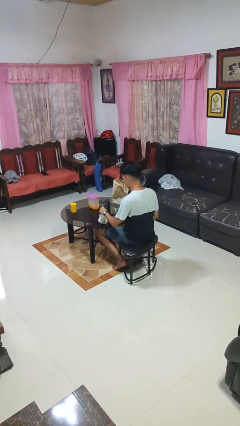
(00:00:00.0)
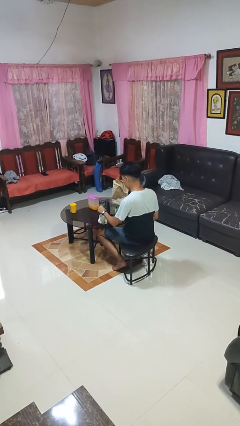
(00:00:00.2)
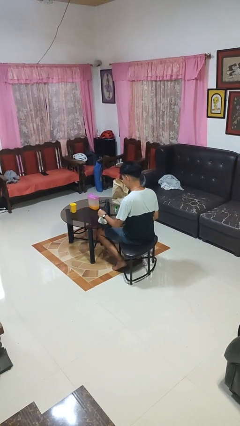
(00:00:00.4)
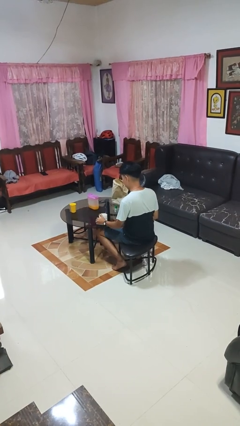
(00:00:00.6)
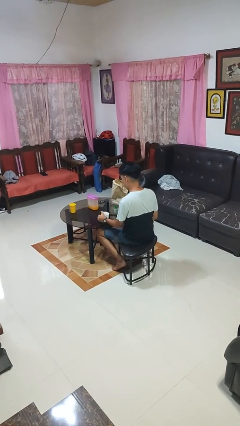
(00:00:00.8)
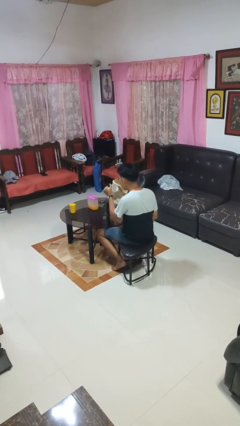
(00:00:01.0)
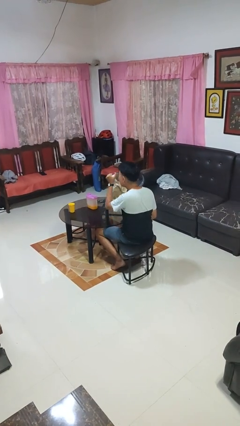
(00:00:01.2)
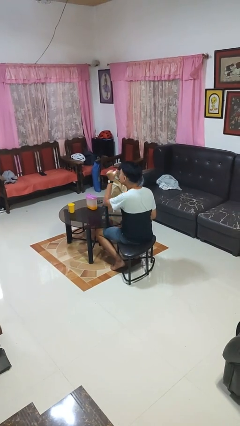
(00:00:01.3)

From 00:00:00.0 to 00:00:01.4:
person stirs mug

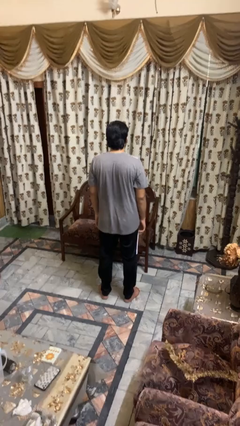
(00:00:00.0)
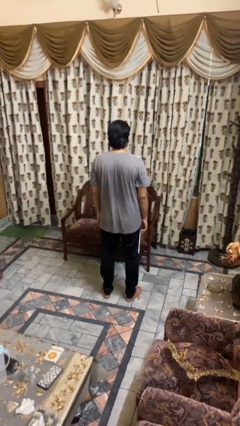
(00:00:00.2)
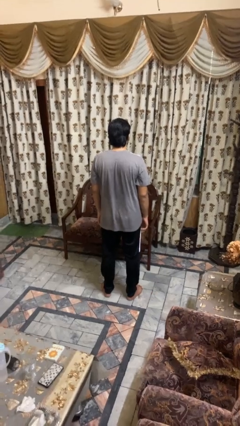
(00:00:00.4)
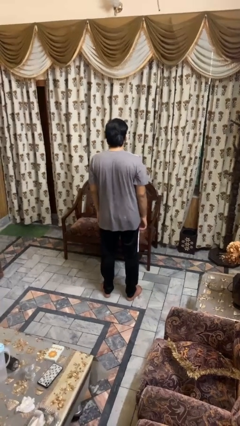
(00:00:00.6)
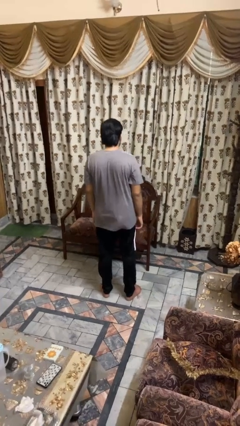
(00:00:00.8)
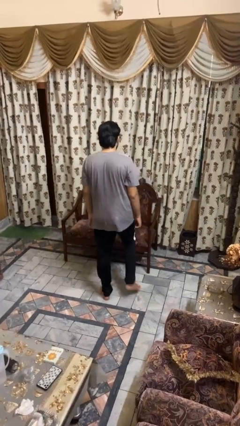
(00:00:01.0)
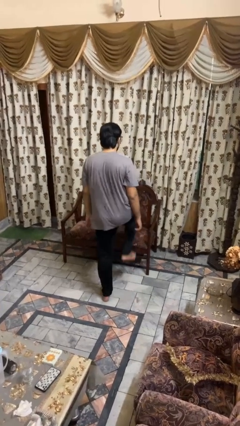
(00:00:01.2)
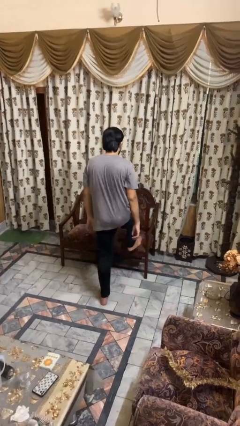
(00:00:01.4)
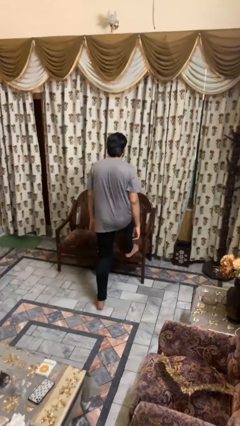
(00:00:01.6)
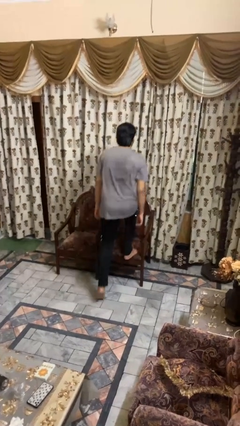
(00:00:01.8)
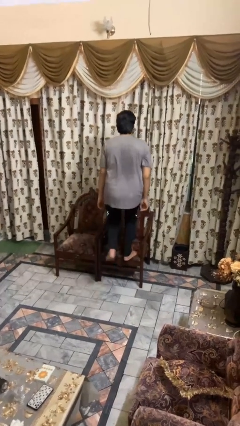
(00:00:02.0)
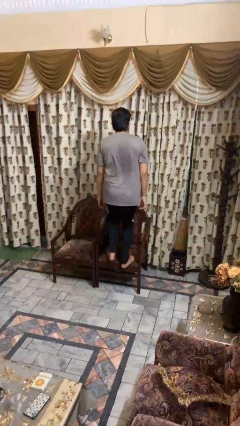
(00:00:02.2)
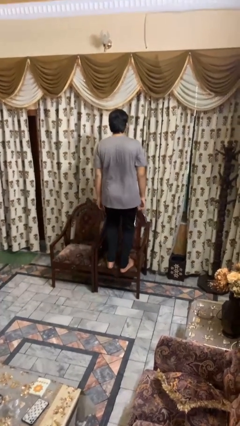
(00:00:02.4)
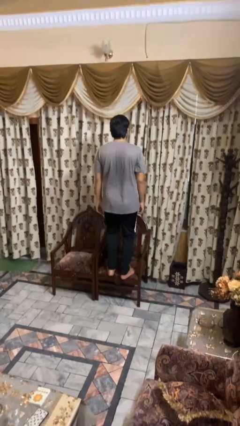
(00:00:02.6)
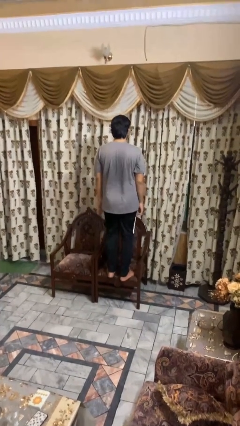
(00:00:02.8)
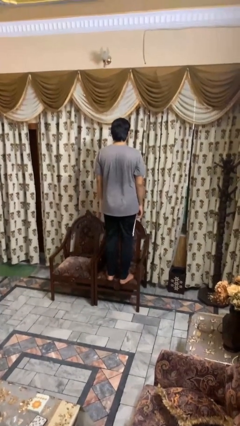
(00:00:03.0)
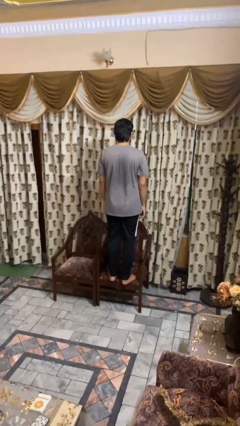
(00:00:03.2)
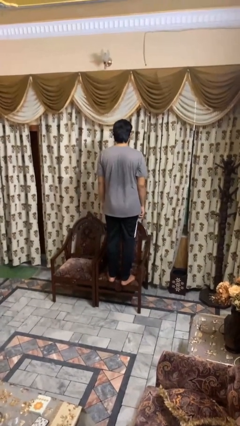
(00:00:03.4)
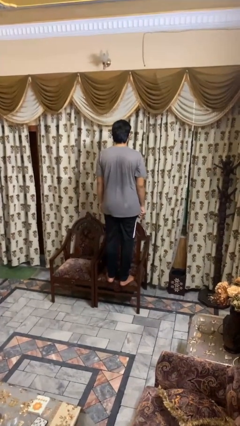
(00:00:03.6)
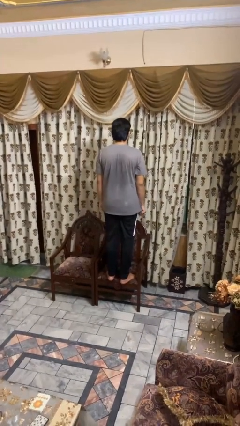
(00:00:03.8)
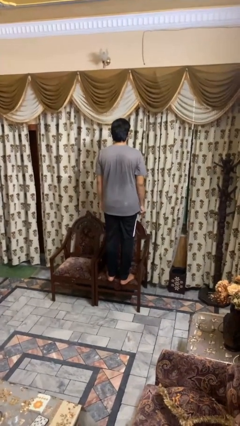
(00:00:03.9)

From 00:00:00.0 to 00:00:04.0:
person climbs on chair

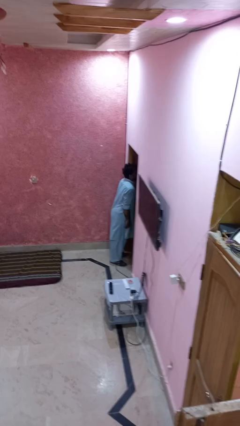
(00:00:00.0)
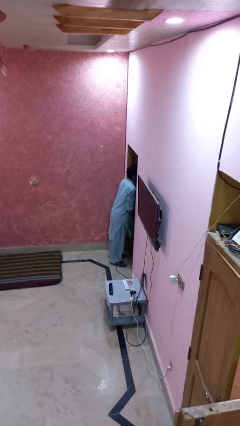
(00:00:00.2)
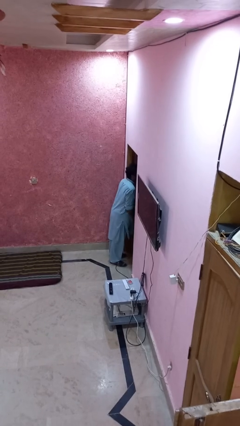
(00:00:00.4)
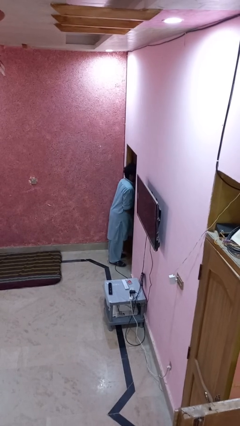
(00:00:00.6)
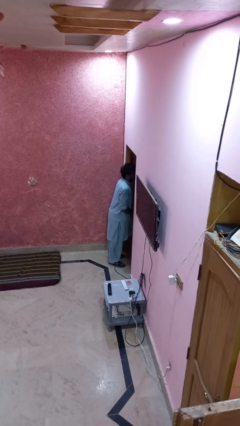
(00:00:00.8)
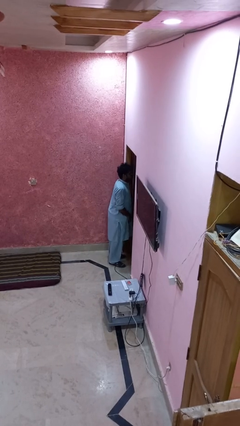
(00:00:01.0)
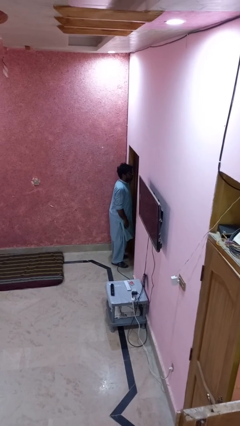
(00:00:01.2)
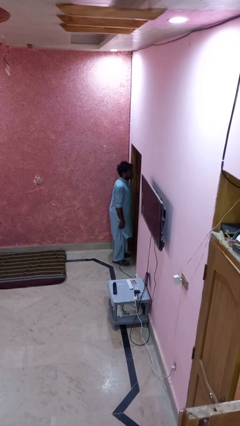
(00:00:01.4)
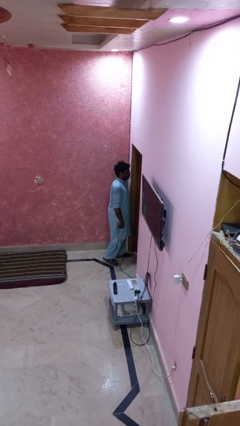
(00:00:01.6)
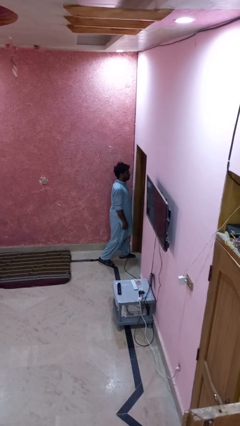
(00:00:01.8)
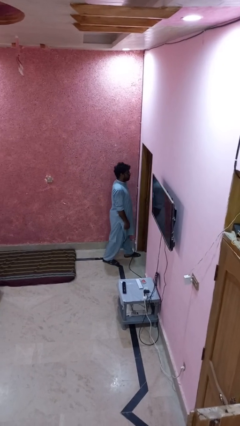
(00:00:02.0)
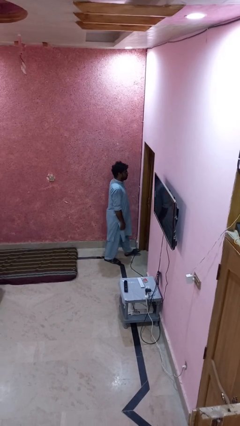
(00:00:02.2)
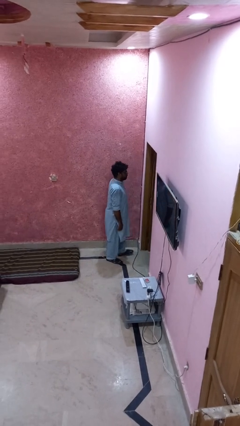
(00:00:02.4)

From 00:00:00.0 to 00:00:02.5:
person bumps into wall

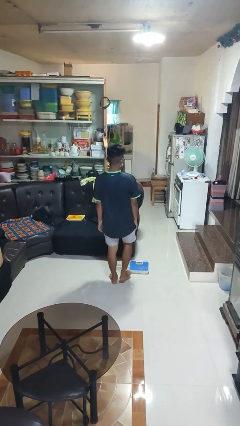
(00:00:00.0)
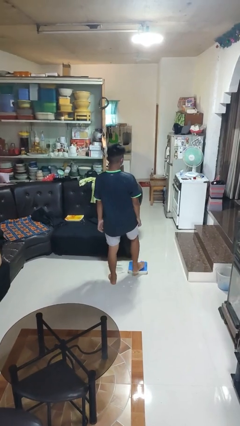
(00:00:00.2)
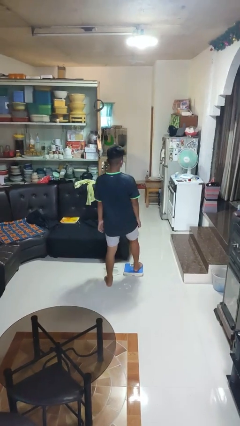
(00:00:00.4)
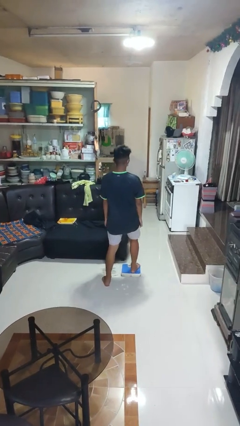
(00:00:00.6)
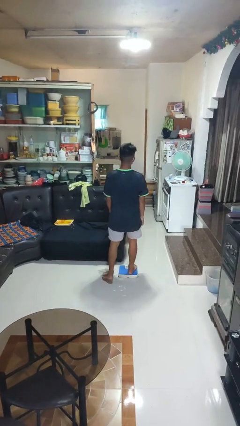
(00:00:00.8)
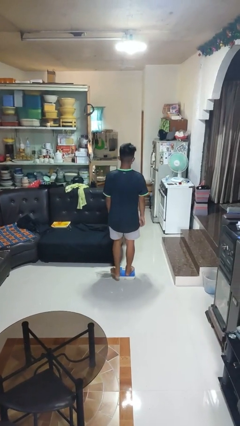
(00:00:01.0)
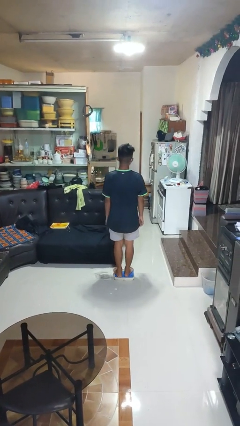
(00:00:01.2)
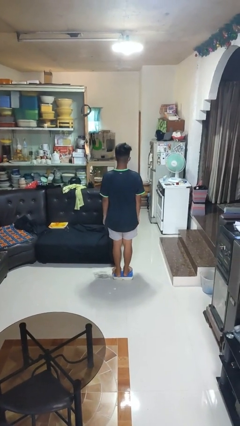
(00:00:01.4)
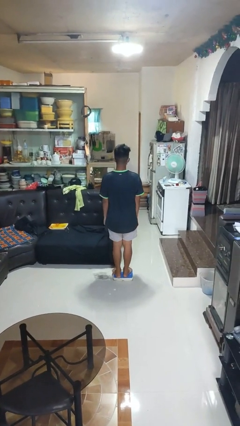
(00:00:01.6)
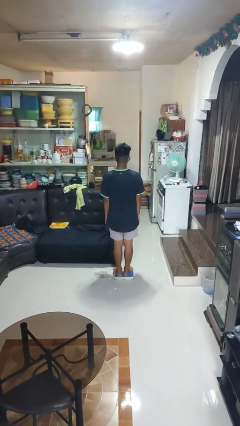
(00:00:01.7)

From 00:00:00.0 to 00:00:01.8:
person uses bodyweight scale

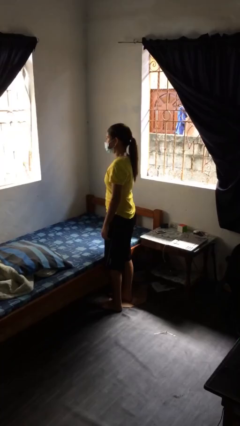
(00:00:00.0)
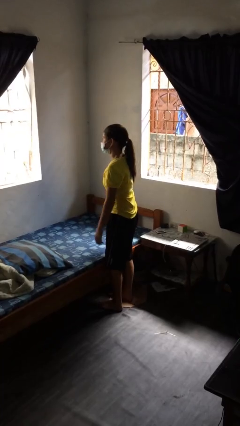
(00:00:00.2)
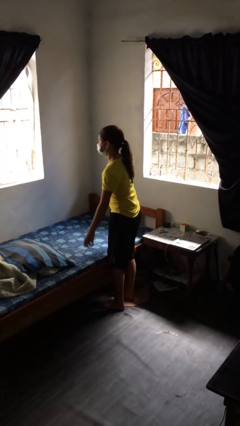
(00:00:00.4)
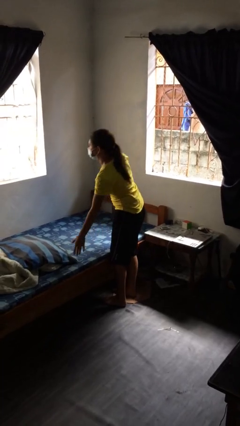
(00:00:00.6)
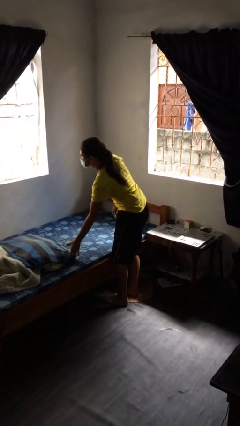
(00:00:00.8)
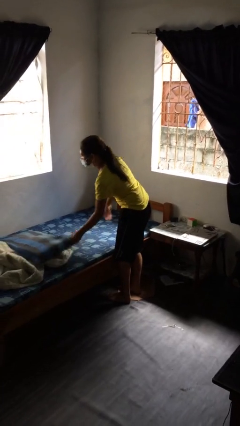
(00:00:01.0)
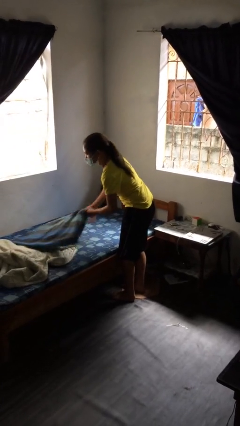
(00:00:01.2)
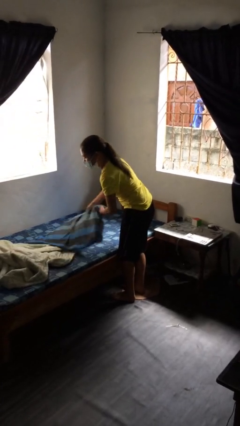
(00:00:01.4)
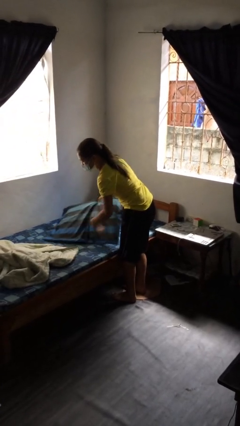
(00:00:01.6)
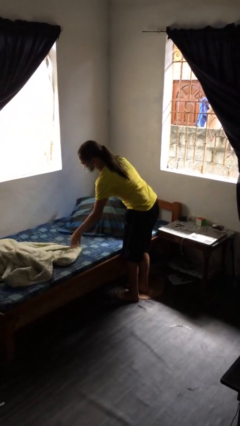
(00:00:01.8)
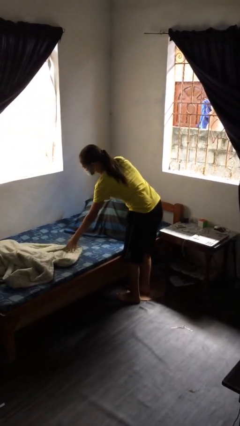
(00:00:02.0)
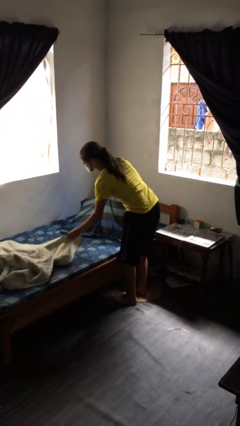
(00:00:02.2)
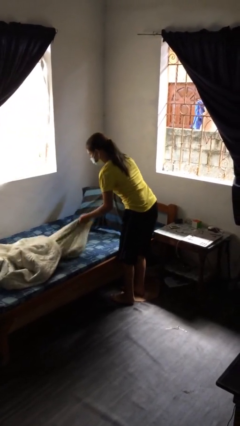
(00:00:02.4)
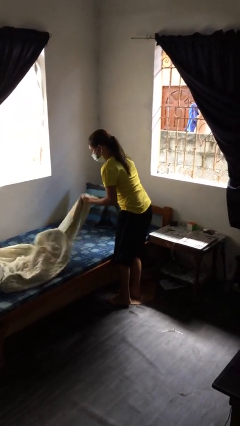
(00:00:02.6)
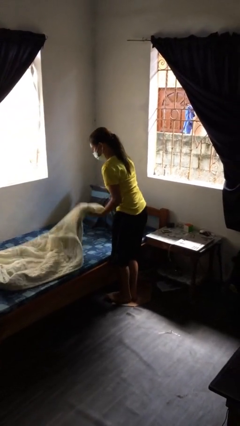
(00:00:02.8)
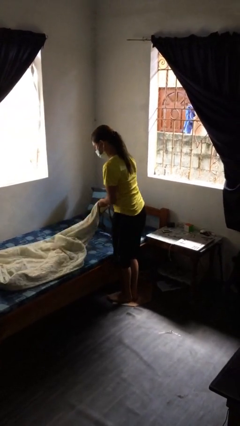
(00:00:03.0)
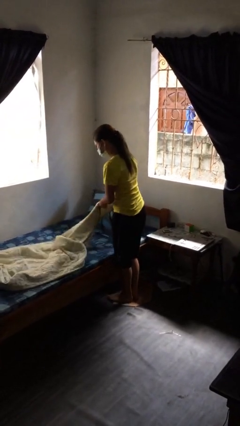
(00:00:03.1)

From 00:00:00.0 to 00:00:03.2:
person makes bed

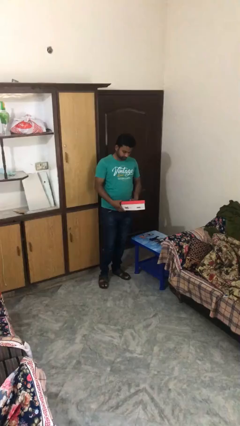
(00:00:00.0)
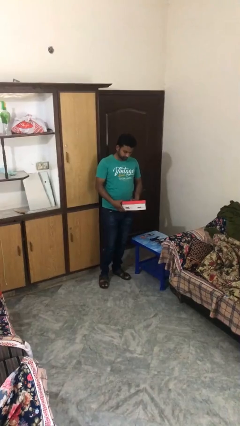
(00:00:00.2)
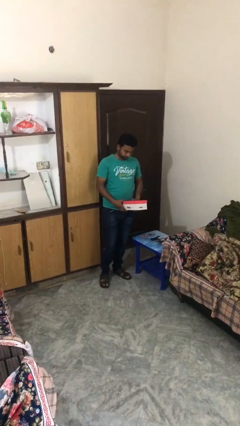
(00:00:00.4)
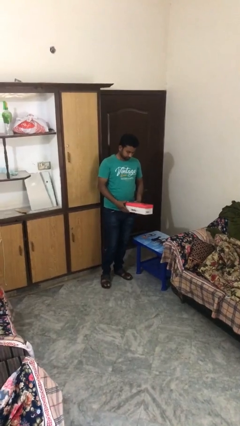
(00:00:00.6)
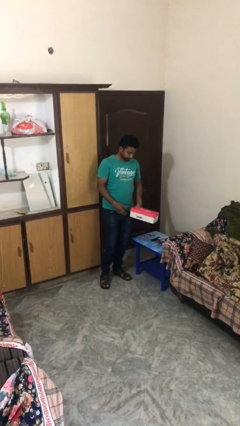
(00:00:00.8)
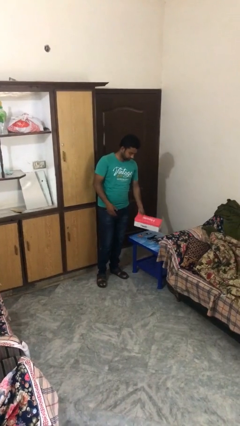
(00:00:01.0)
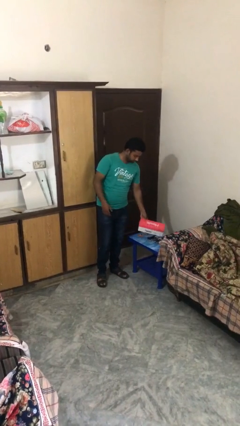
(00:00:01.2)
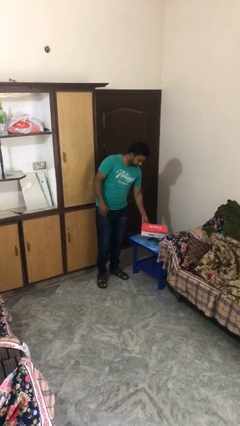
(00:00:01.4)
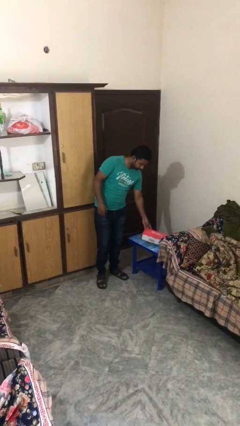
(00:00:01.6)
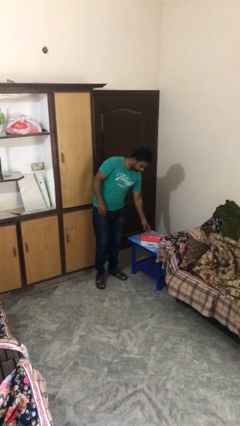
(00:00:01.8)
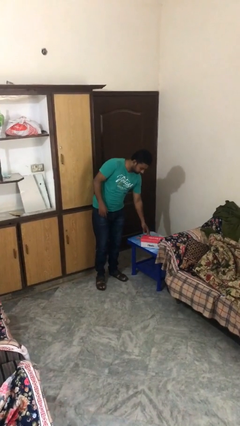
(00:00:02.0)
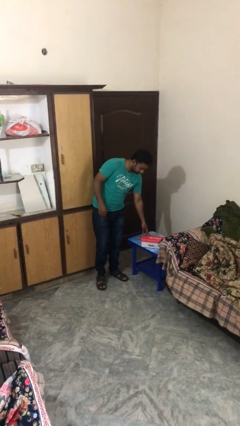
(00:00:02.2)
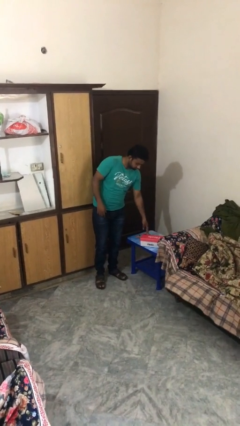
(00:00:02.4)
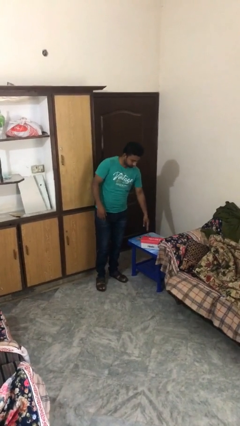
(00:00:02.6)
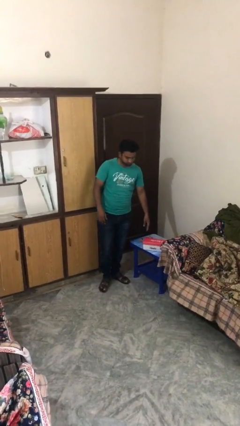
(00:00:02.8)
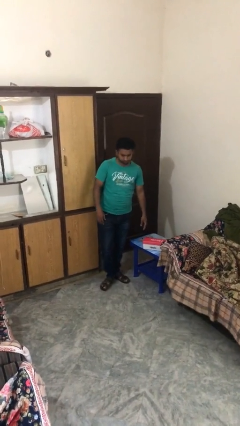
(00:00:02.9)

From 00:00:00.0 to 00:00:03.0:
person puts down object on table

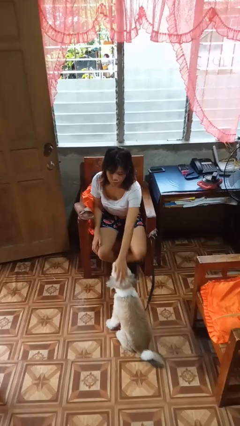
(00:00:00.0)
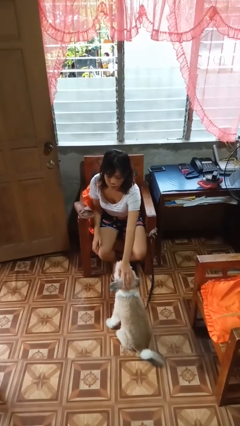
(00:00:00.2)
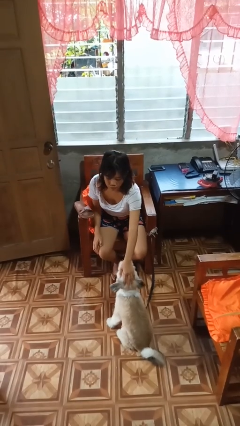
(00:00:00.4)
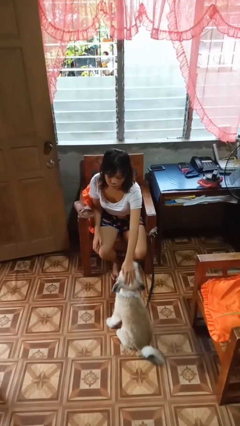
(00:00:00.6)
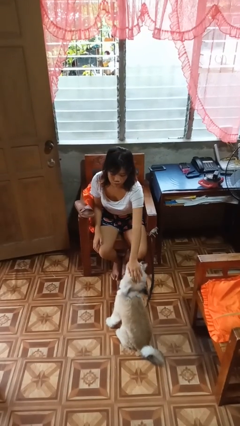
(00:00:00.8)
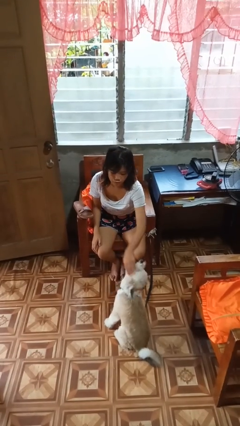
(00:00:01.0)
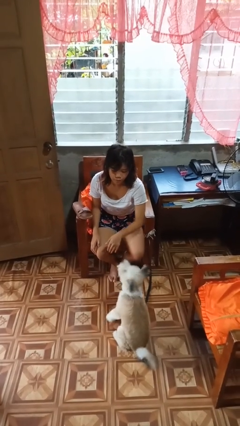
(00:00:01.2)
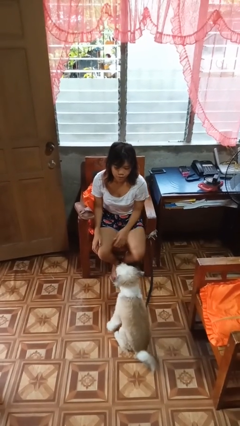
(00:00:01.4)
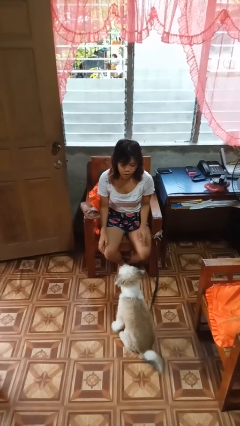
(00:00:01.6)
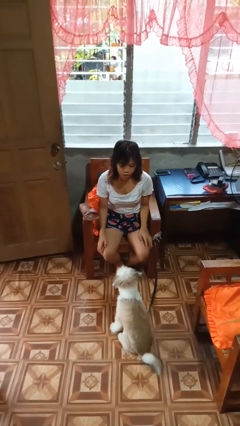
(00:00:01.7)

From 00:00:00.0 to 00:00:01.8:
person pets dog
